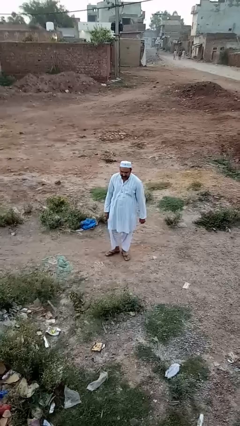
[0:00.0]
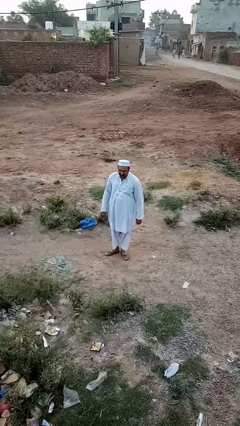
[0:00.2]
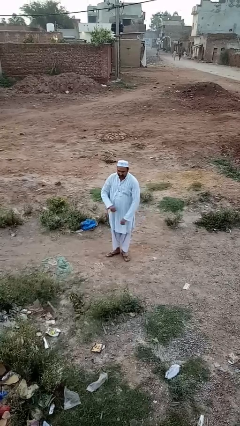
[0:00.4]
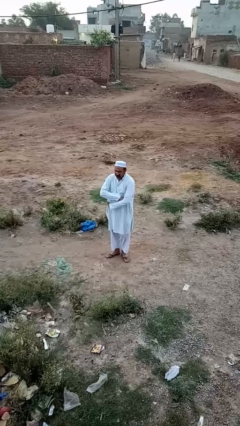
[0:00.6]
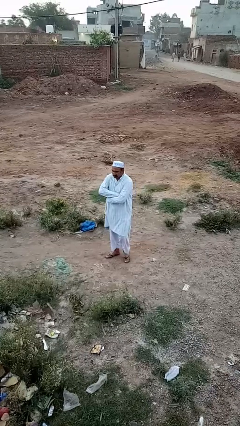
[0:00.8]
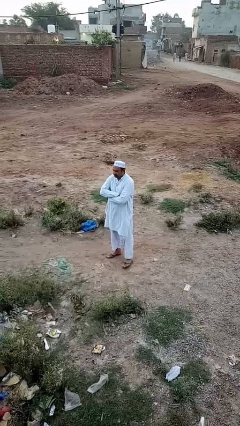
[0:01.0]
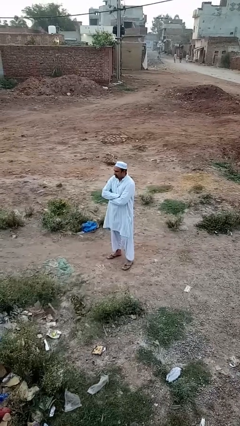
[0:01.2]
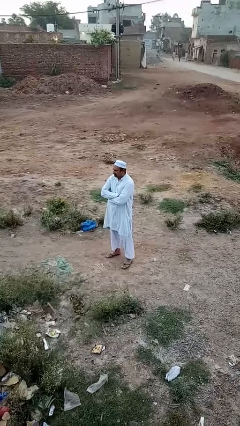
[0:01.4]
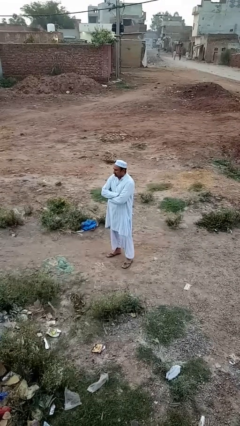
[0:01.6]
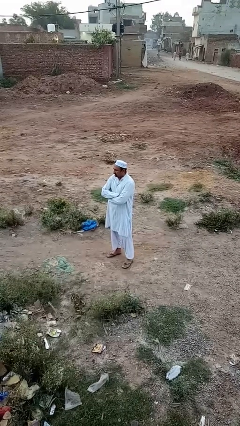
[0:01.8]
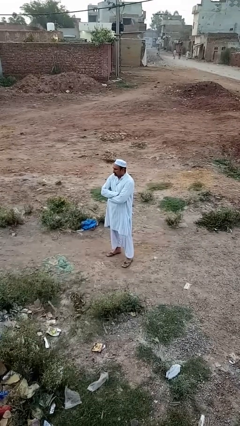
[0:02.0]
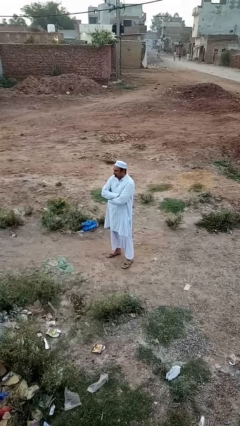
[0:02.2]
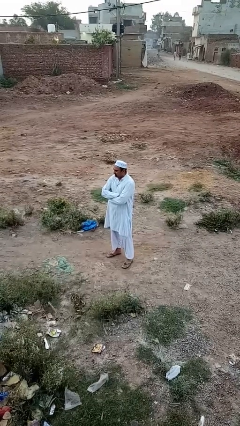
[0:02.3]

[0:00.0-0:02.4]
person crosses arms

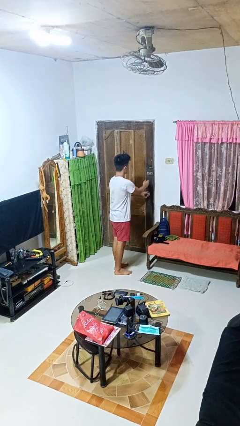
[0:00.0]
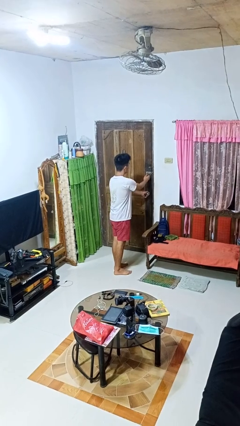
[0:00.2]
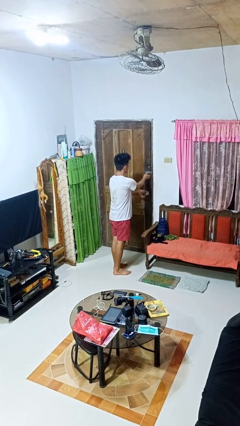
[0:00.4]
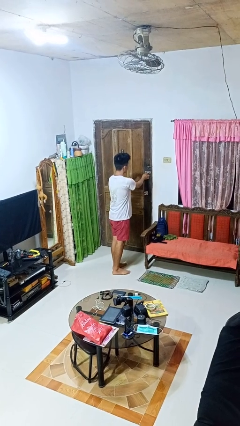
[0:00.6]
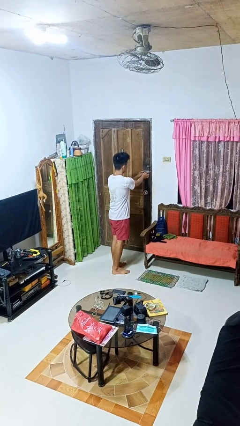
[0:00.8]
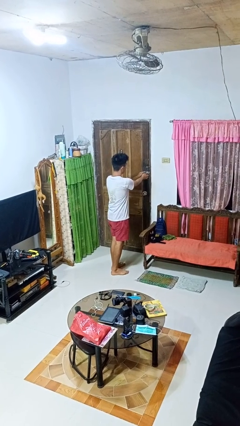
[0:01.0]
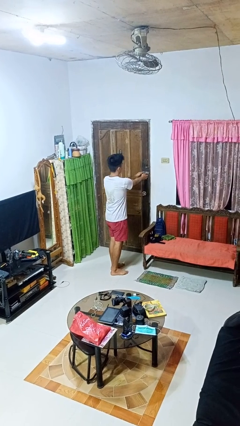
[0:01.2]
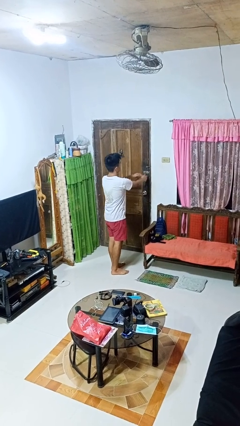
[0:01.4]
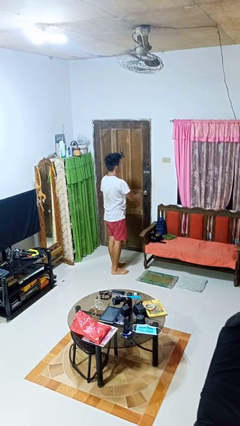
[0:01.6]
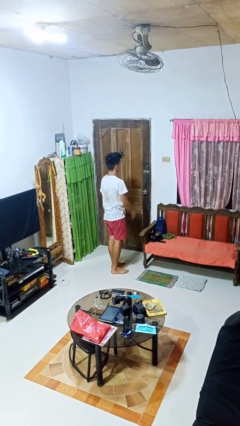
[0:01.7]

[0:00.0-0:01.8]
person locks door with keys

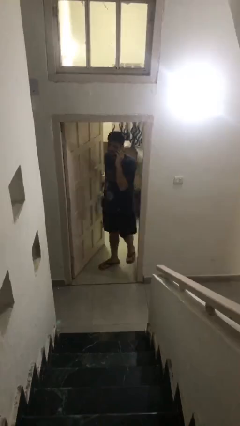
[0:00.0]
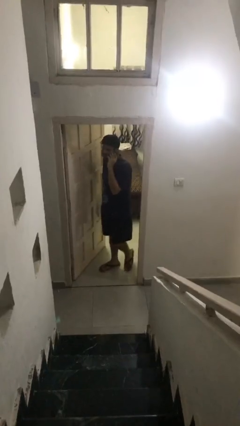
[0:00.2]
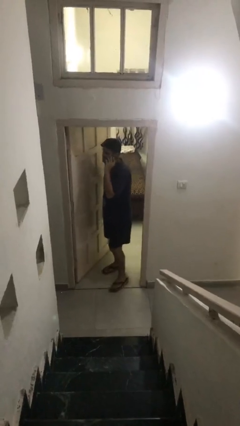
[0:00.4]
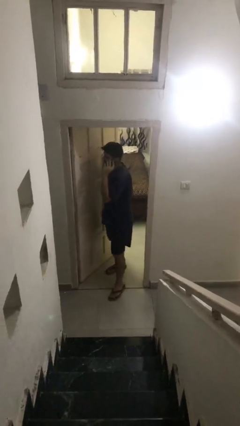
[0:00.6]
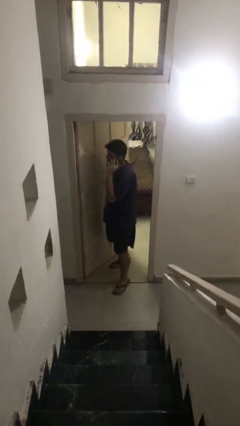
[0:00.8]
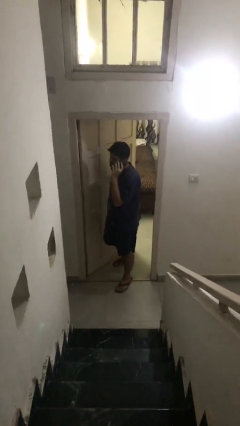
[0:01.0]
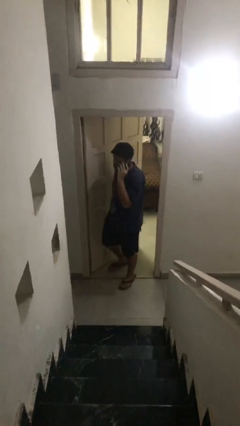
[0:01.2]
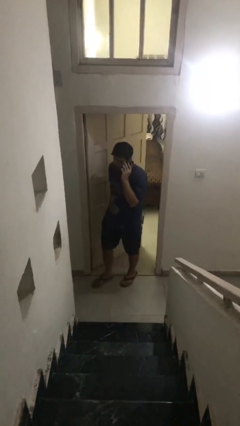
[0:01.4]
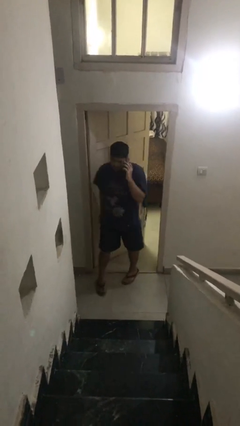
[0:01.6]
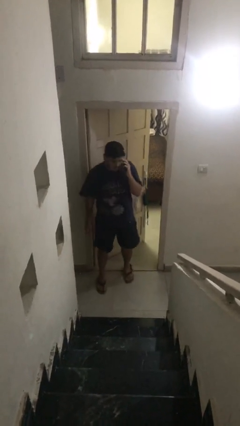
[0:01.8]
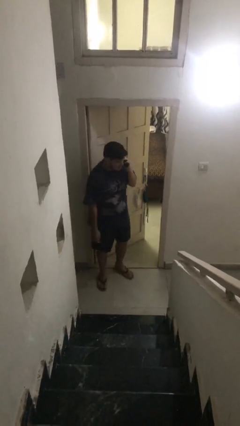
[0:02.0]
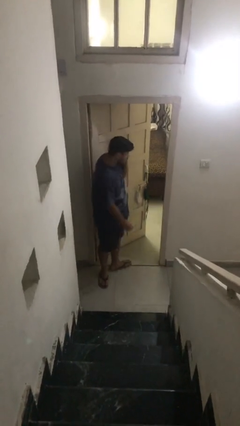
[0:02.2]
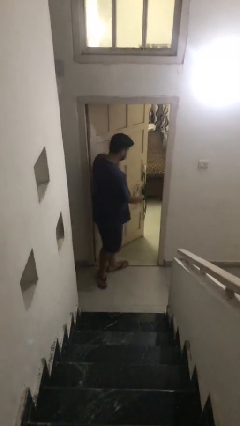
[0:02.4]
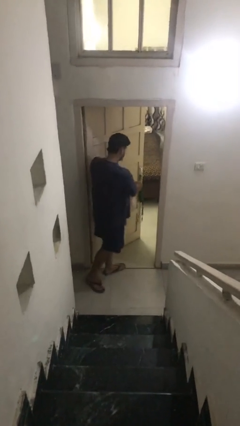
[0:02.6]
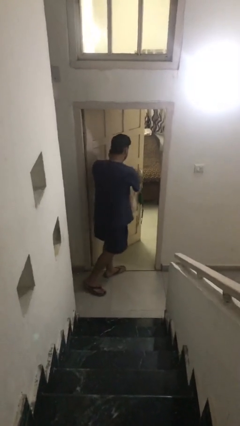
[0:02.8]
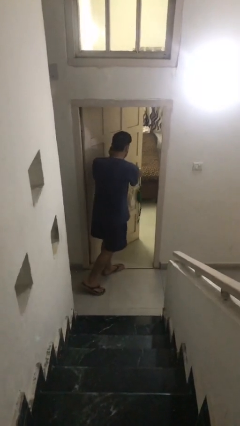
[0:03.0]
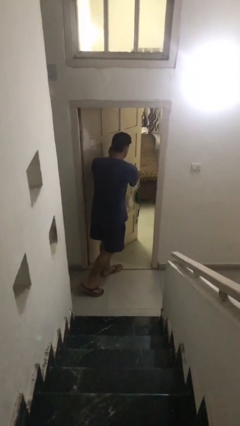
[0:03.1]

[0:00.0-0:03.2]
person enters scene through structure

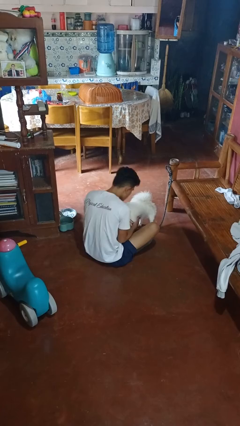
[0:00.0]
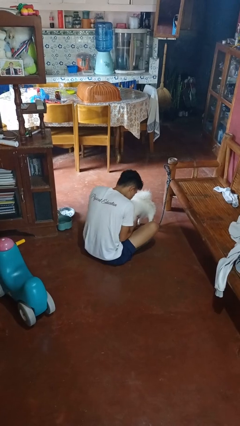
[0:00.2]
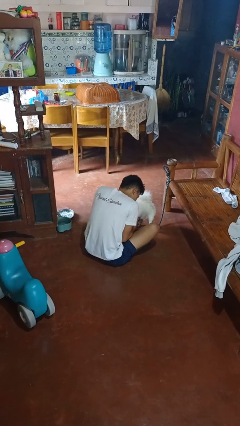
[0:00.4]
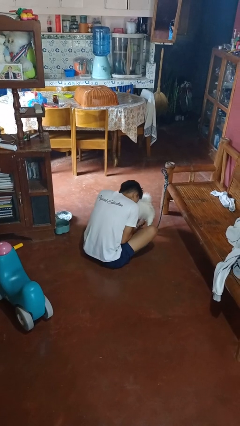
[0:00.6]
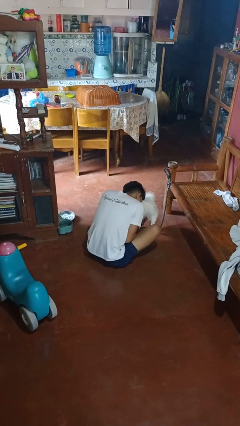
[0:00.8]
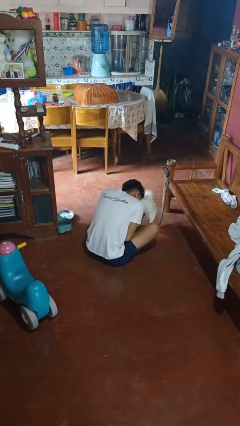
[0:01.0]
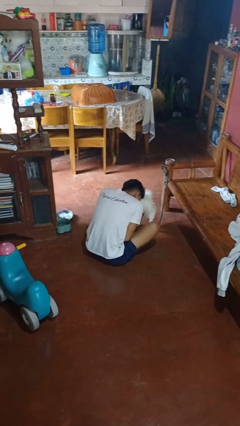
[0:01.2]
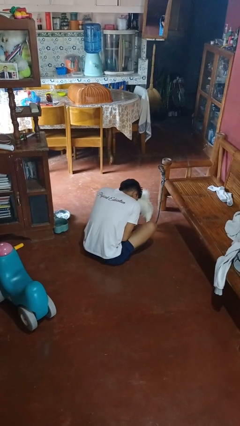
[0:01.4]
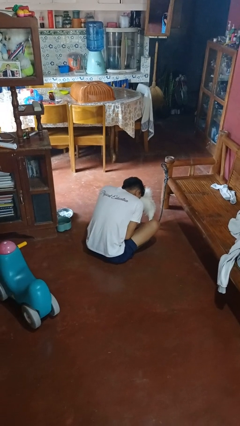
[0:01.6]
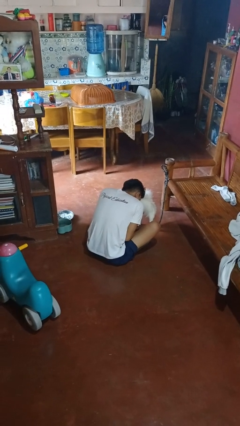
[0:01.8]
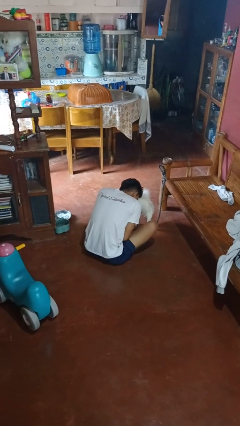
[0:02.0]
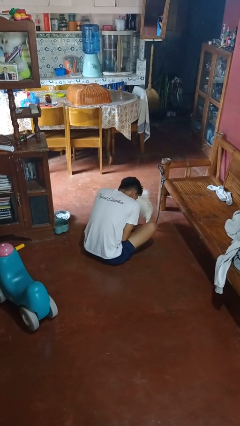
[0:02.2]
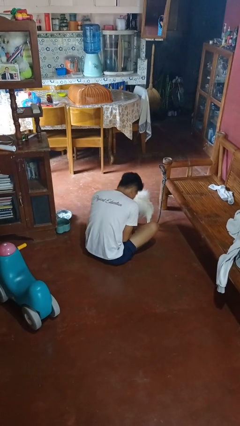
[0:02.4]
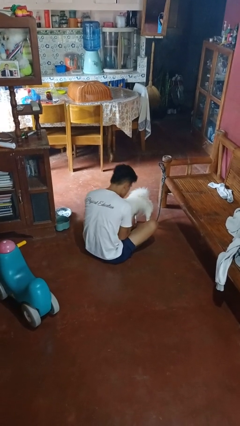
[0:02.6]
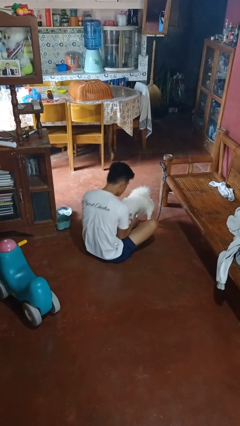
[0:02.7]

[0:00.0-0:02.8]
person hugs dog

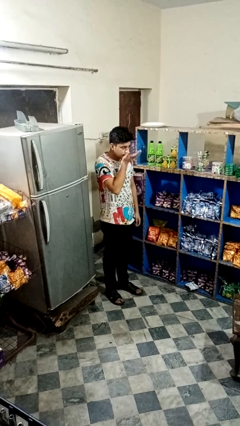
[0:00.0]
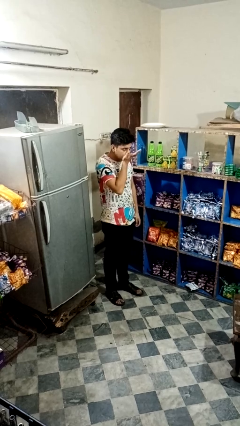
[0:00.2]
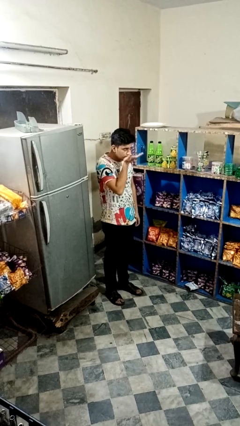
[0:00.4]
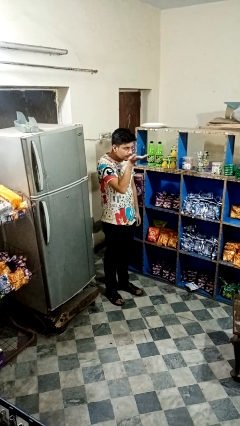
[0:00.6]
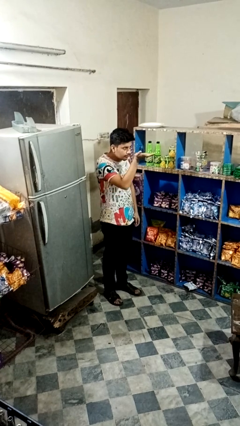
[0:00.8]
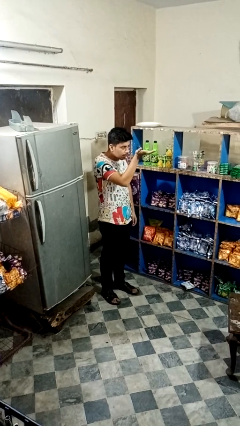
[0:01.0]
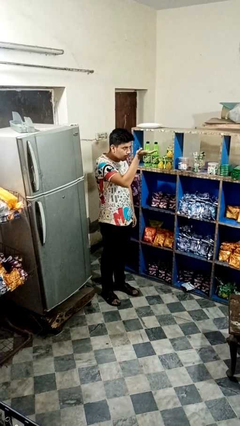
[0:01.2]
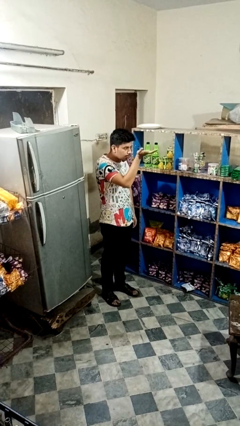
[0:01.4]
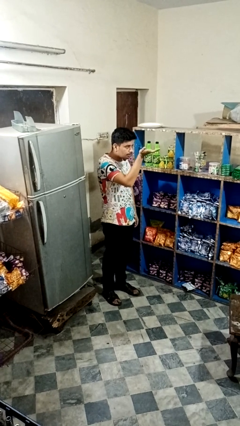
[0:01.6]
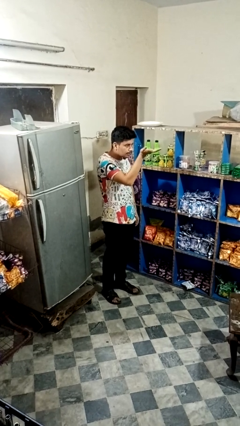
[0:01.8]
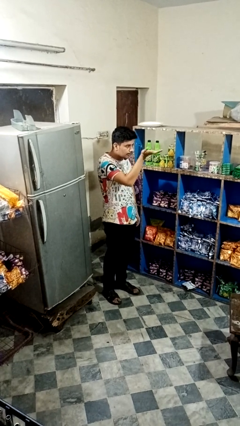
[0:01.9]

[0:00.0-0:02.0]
person gestures blow kiss

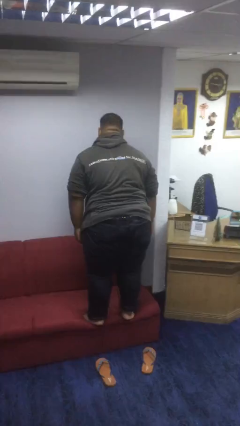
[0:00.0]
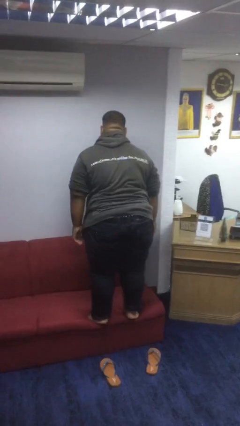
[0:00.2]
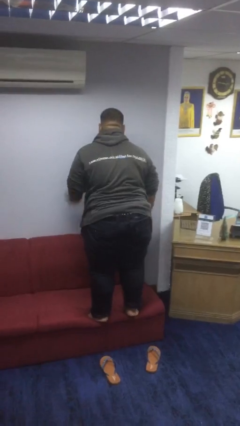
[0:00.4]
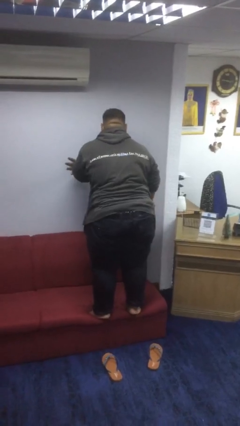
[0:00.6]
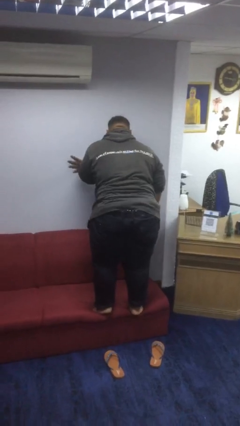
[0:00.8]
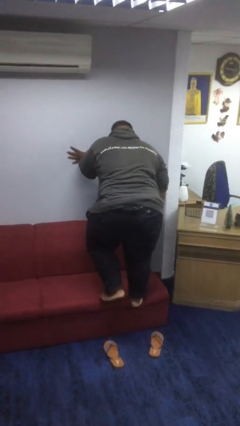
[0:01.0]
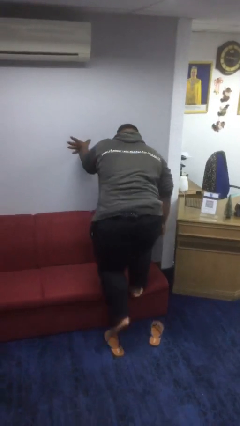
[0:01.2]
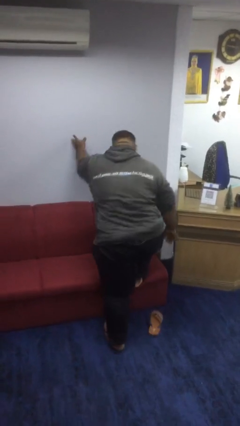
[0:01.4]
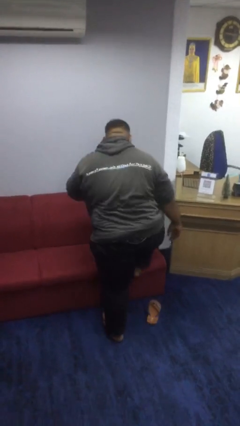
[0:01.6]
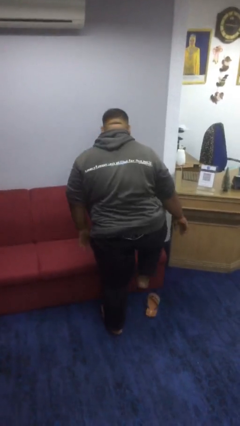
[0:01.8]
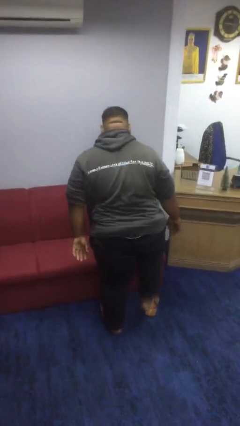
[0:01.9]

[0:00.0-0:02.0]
person climbs off couch

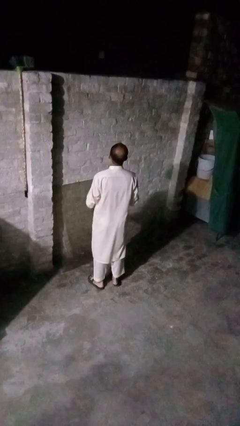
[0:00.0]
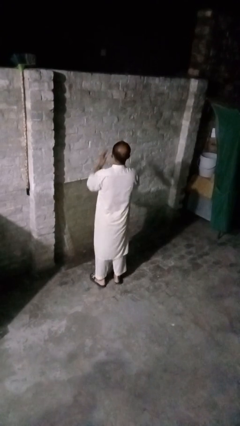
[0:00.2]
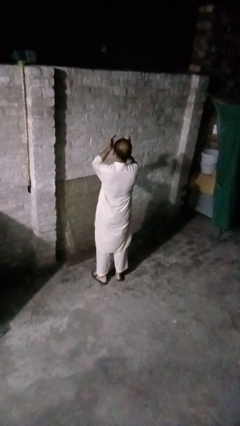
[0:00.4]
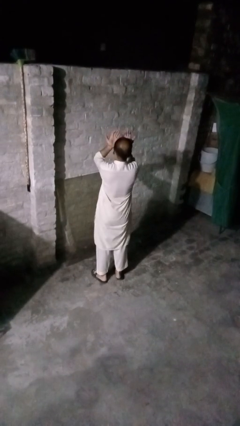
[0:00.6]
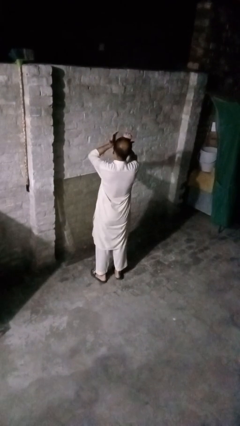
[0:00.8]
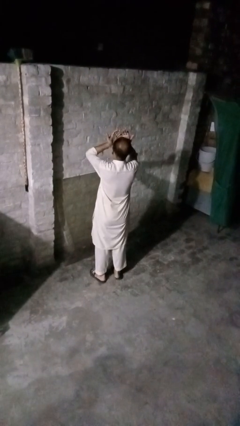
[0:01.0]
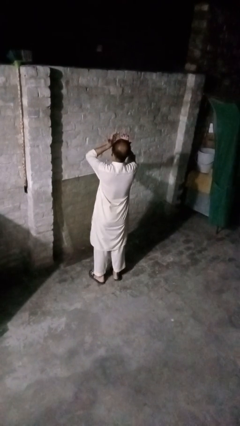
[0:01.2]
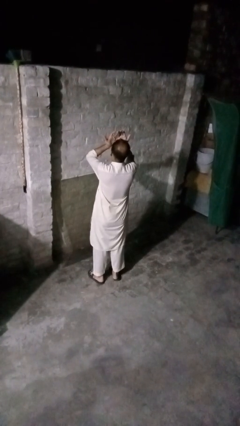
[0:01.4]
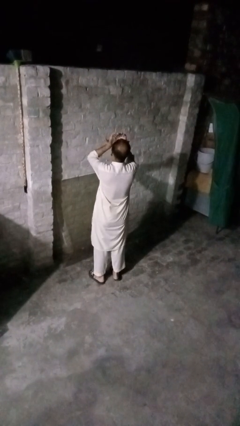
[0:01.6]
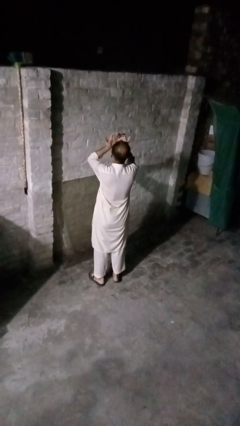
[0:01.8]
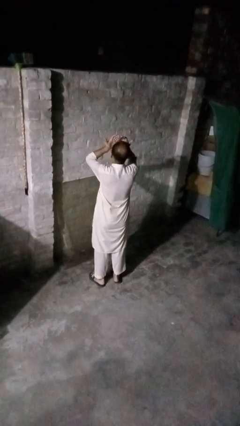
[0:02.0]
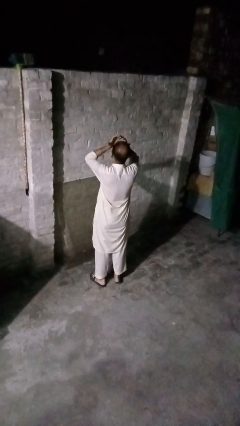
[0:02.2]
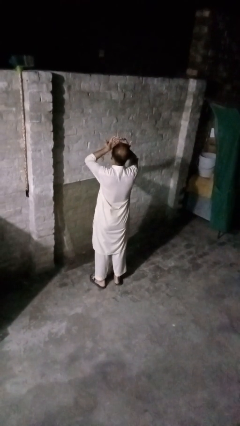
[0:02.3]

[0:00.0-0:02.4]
person rubs eyes
